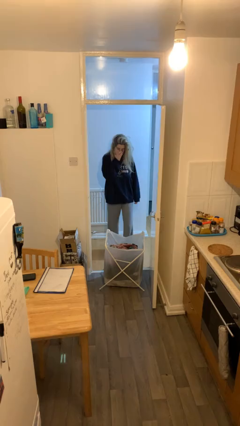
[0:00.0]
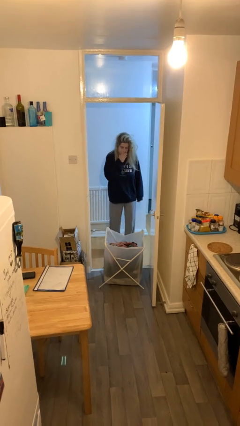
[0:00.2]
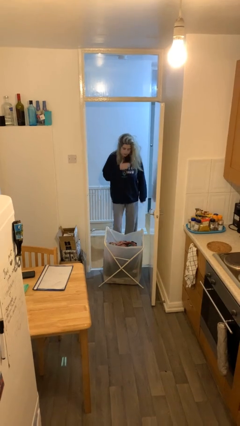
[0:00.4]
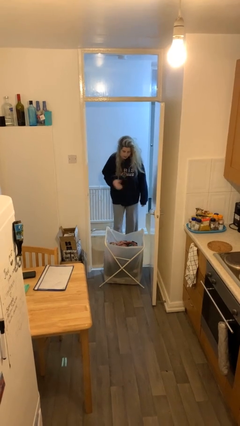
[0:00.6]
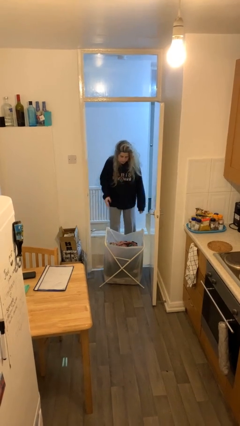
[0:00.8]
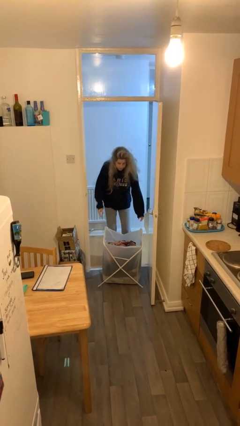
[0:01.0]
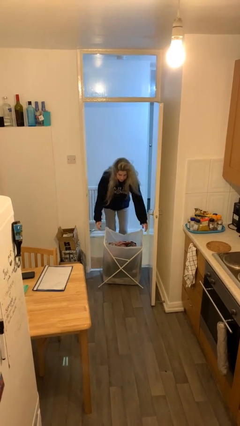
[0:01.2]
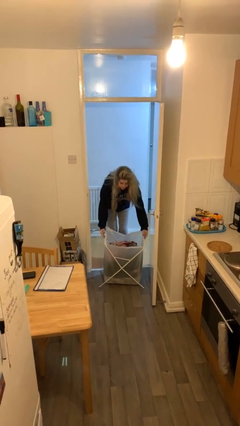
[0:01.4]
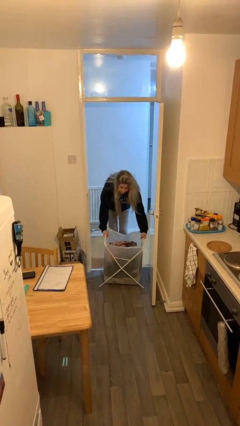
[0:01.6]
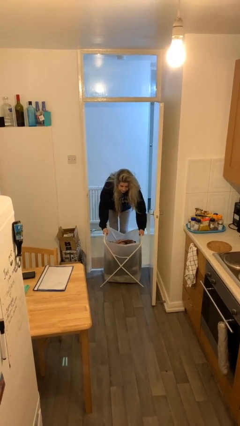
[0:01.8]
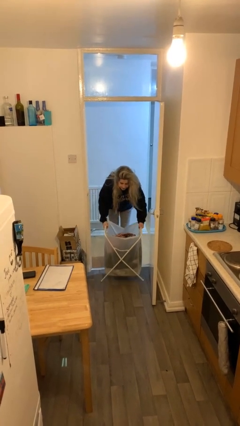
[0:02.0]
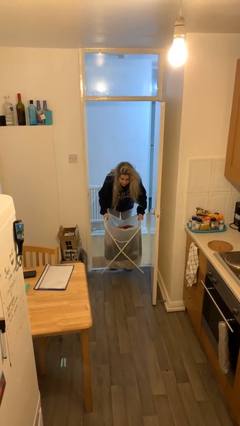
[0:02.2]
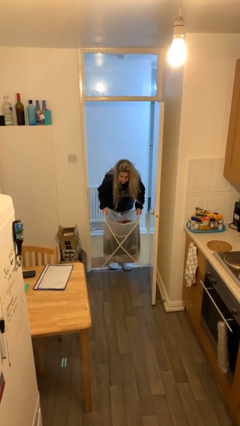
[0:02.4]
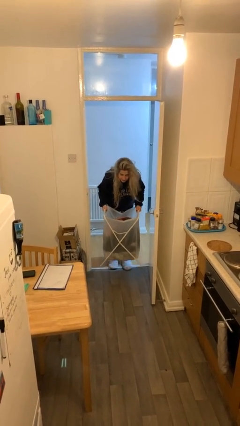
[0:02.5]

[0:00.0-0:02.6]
person picks up object from floor

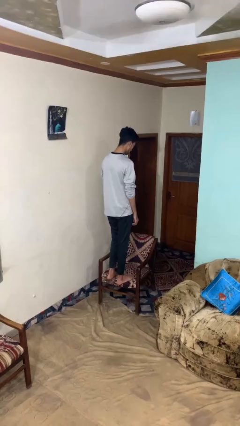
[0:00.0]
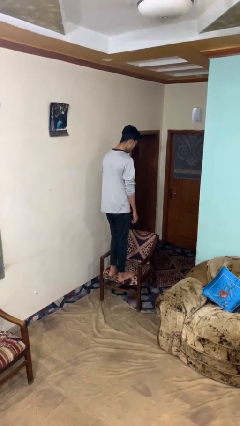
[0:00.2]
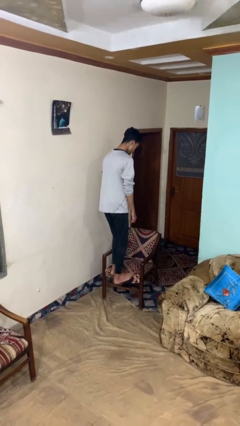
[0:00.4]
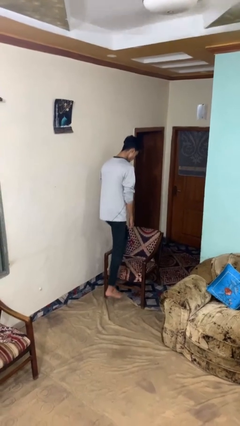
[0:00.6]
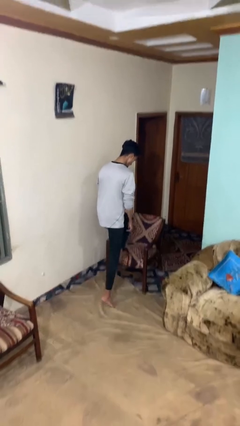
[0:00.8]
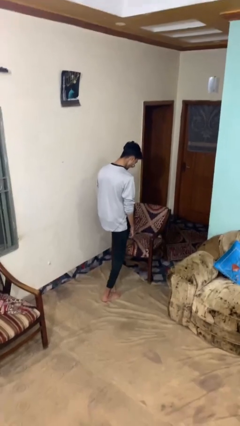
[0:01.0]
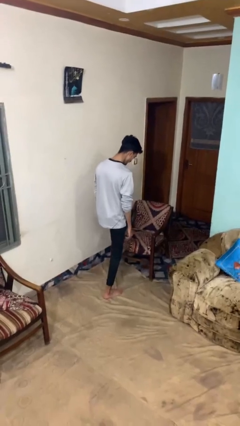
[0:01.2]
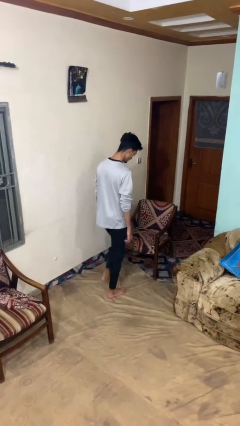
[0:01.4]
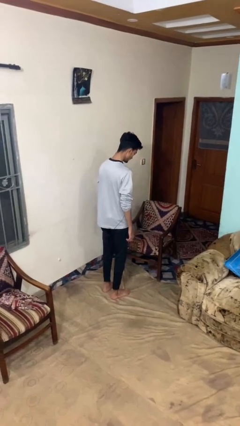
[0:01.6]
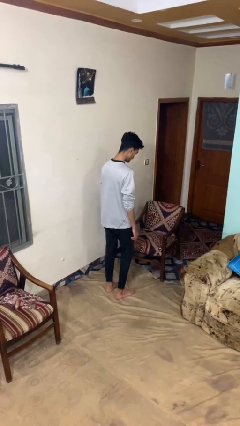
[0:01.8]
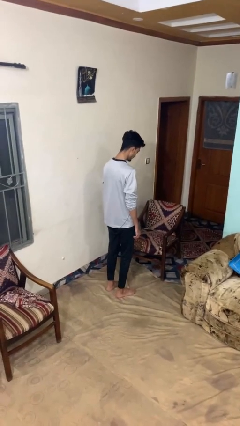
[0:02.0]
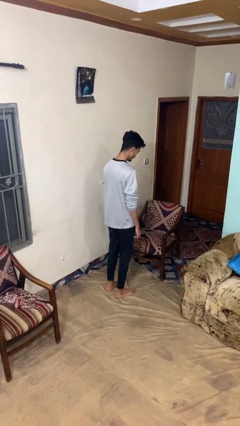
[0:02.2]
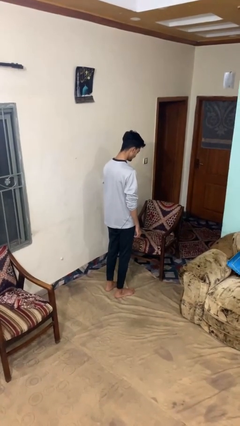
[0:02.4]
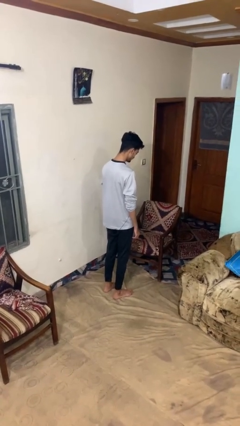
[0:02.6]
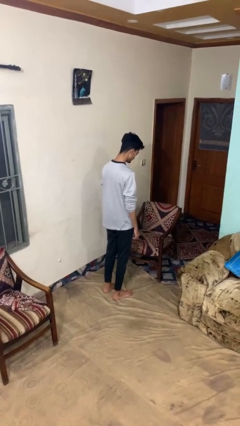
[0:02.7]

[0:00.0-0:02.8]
person climbs off chair

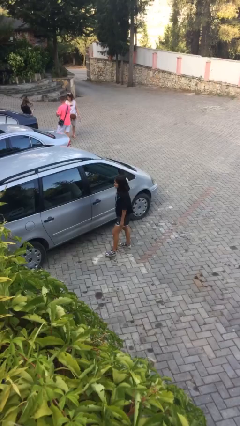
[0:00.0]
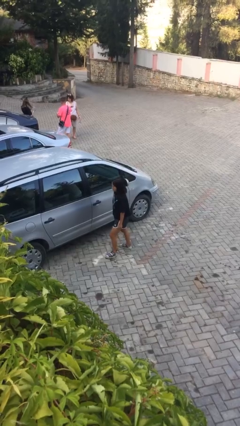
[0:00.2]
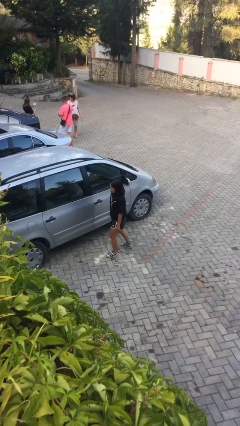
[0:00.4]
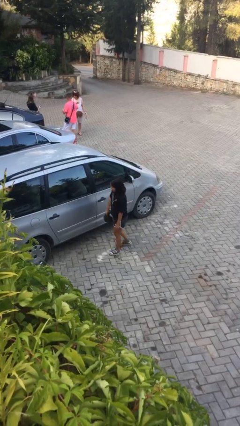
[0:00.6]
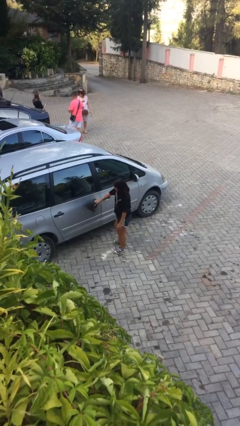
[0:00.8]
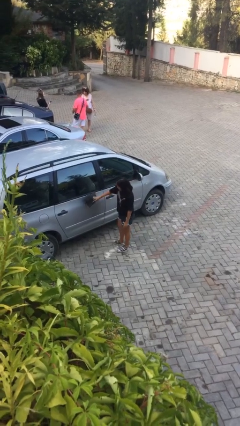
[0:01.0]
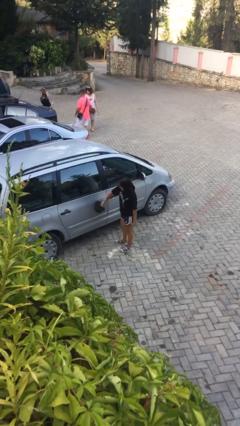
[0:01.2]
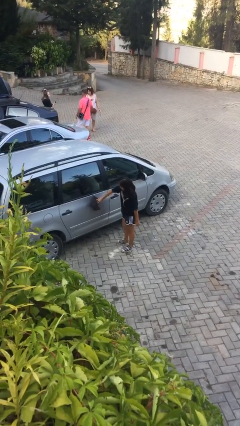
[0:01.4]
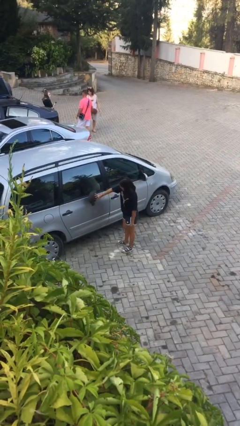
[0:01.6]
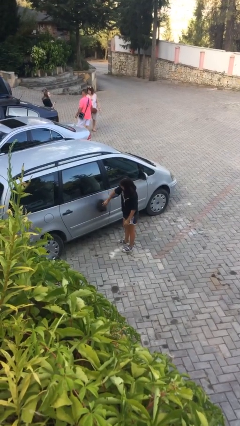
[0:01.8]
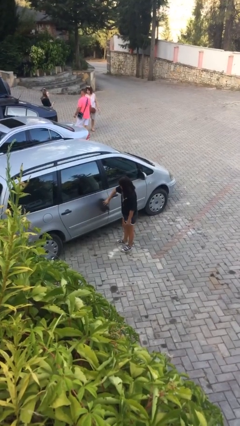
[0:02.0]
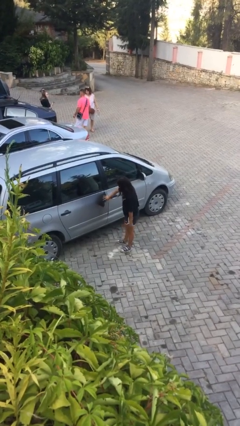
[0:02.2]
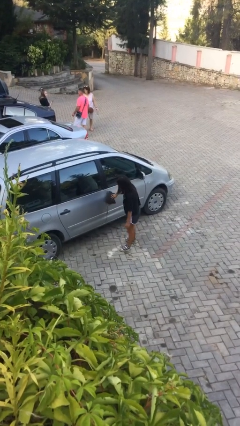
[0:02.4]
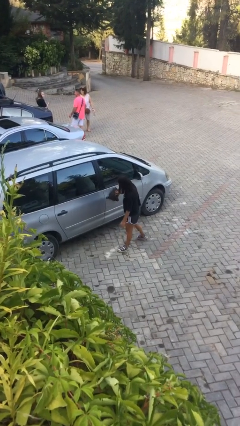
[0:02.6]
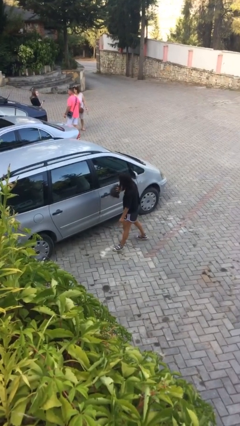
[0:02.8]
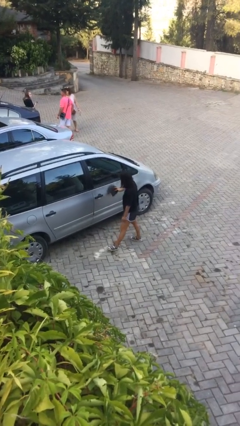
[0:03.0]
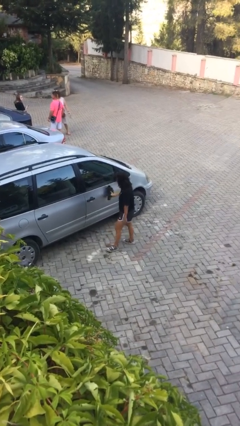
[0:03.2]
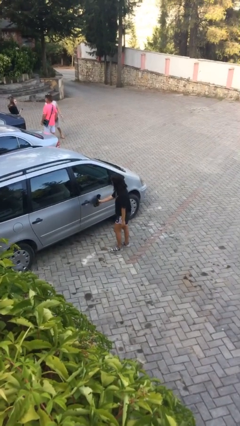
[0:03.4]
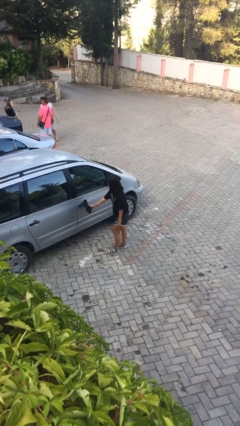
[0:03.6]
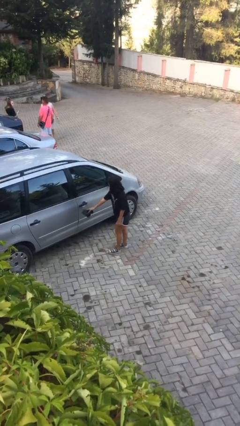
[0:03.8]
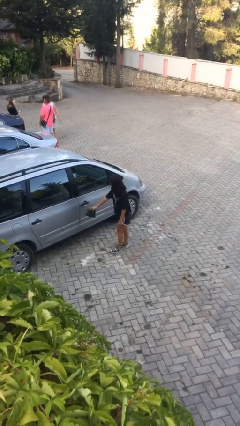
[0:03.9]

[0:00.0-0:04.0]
person polishes car with rag

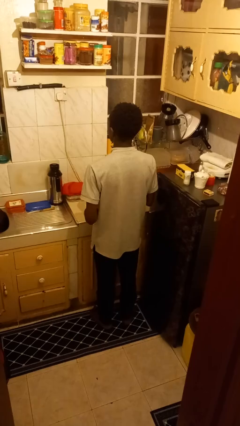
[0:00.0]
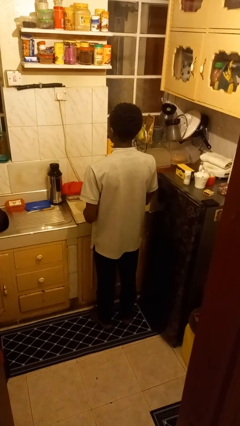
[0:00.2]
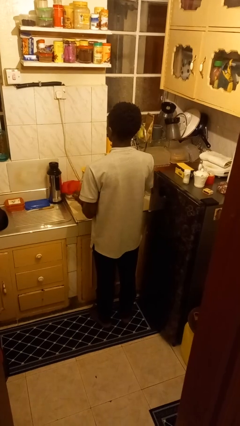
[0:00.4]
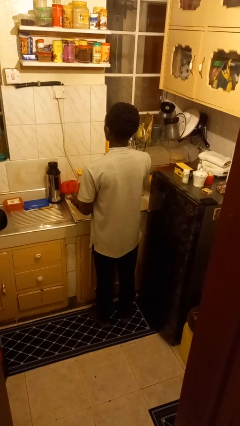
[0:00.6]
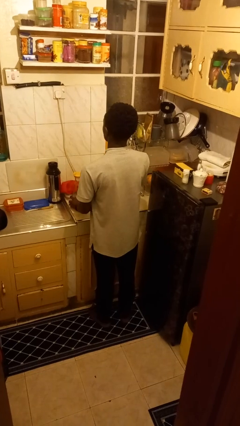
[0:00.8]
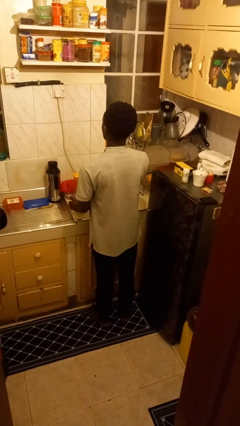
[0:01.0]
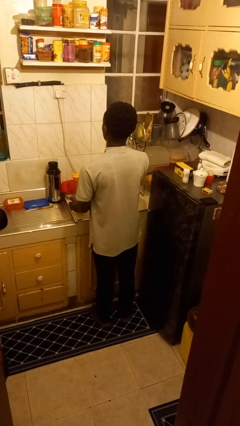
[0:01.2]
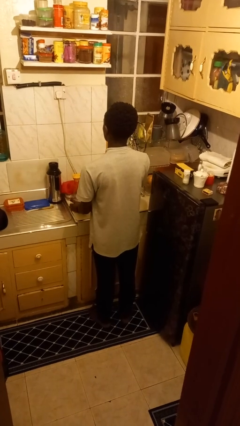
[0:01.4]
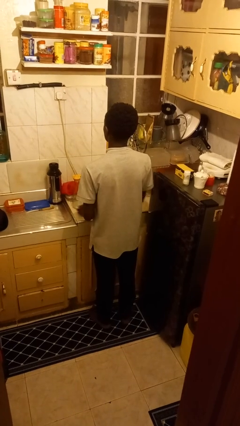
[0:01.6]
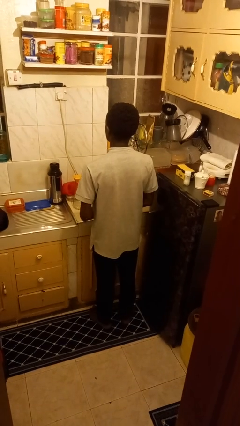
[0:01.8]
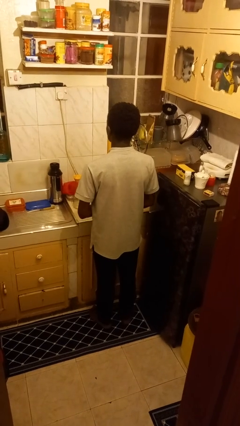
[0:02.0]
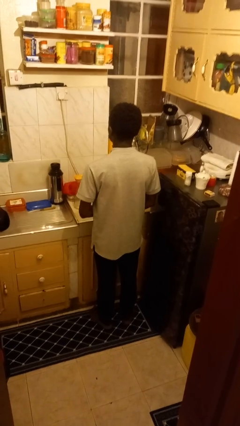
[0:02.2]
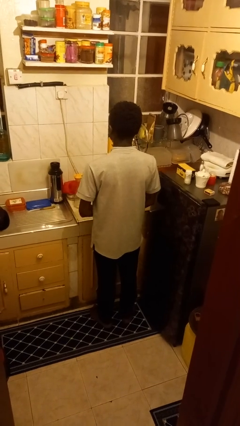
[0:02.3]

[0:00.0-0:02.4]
person puts down object on countertop

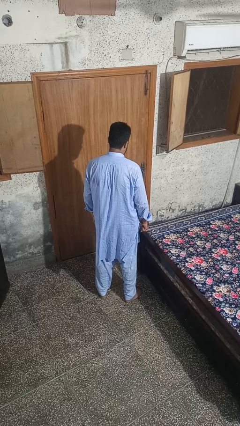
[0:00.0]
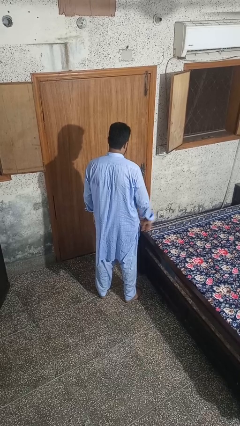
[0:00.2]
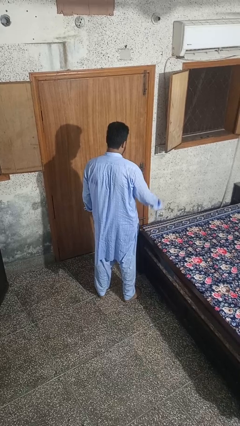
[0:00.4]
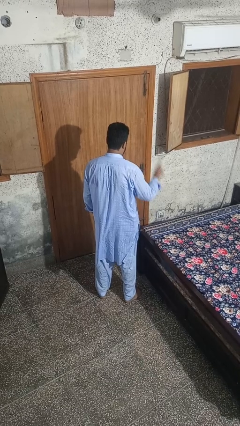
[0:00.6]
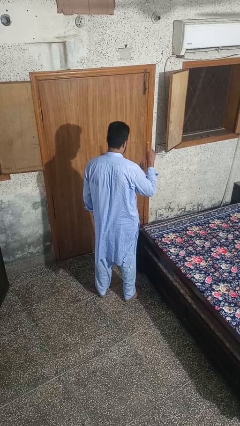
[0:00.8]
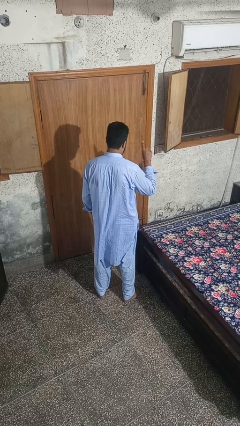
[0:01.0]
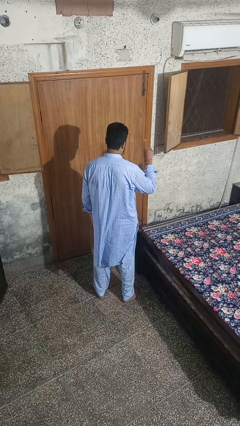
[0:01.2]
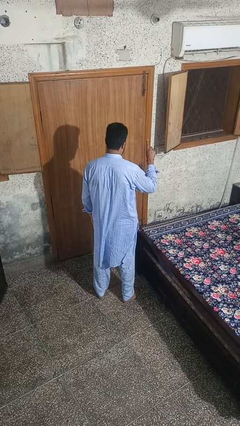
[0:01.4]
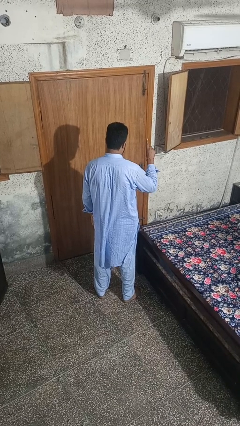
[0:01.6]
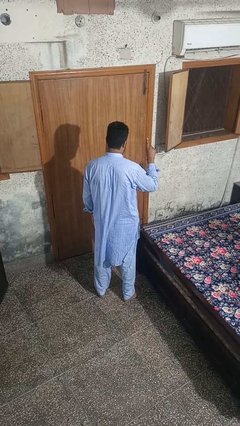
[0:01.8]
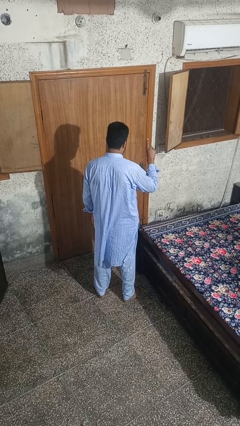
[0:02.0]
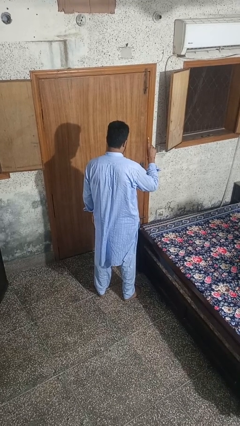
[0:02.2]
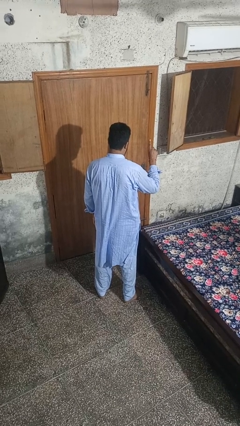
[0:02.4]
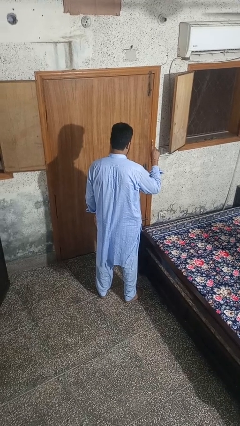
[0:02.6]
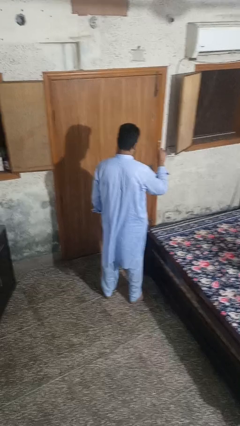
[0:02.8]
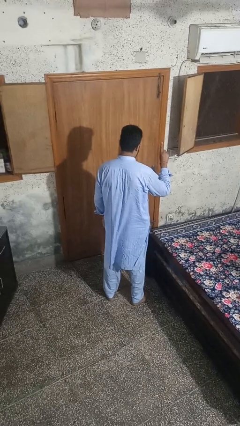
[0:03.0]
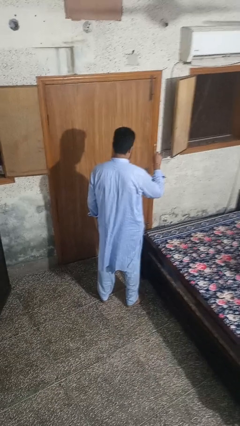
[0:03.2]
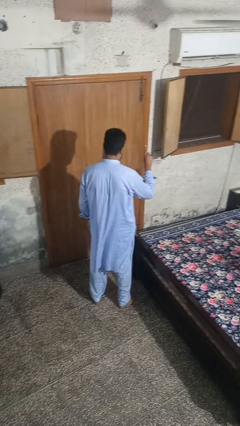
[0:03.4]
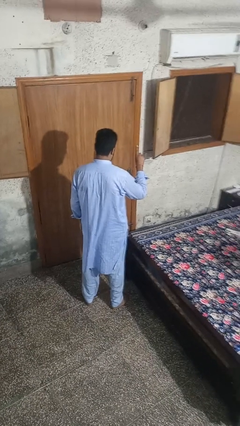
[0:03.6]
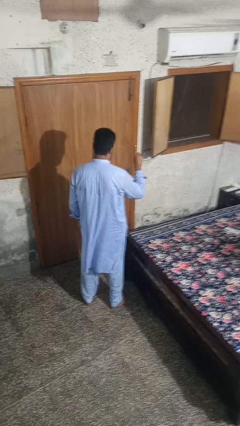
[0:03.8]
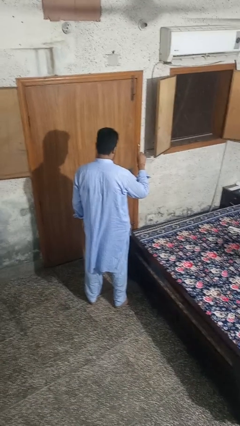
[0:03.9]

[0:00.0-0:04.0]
person gestures number one

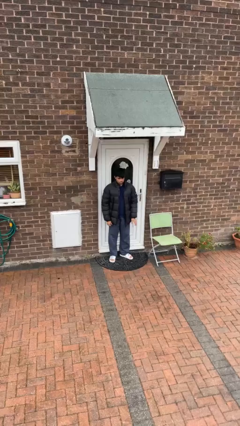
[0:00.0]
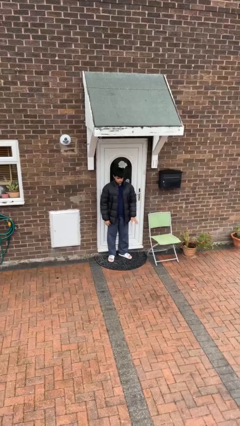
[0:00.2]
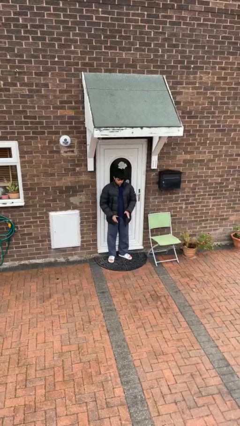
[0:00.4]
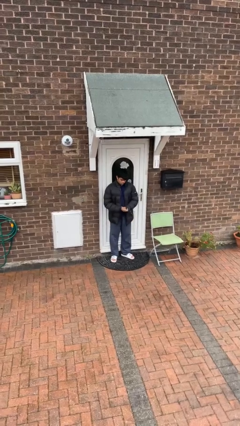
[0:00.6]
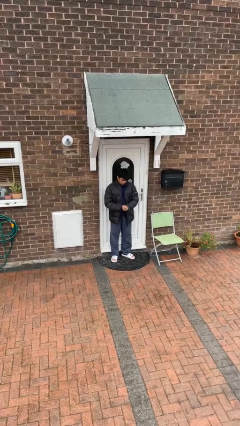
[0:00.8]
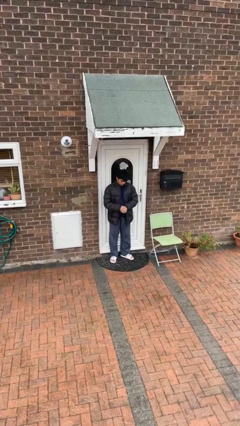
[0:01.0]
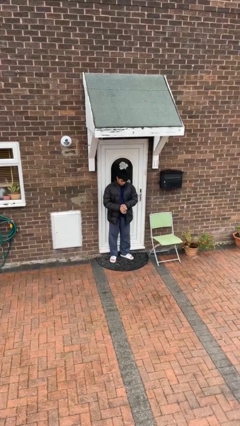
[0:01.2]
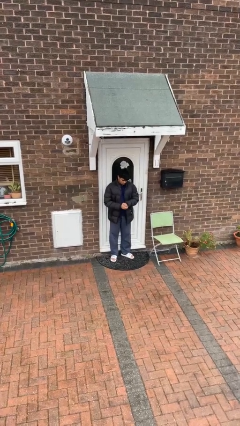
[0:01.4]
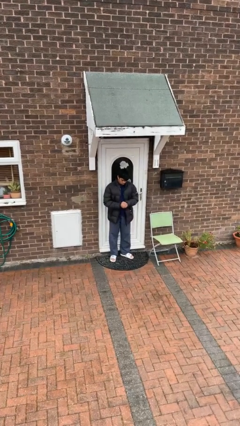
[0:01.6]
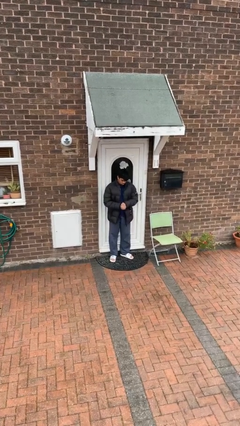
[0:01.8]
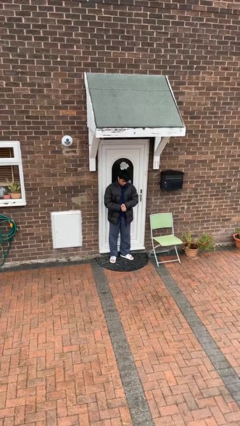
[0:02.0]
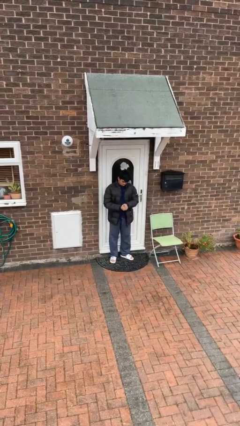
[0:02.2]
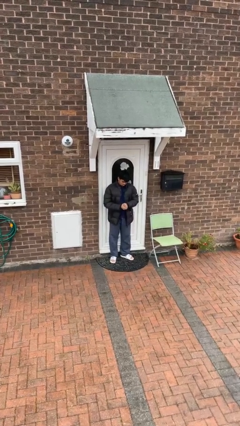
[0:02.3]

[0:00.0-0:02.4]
person cracks knuckles
